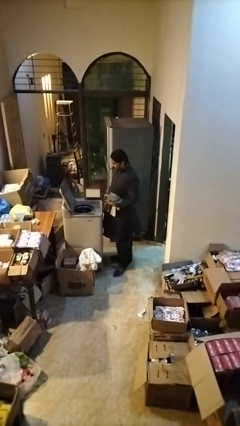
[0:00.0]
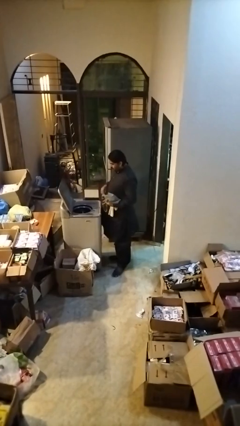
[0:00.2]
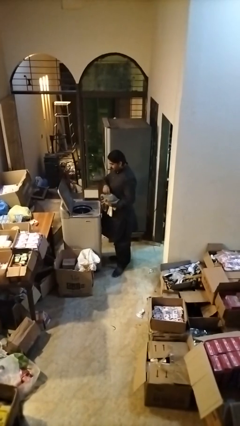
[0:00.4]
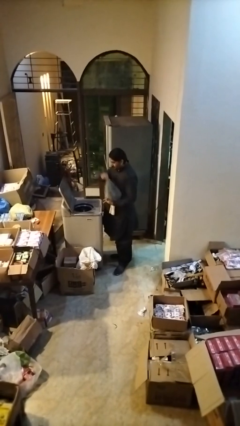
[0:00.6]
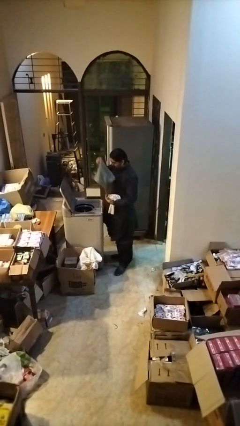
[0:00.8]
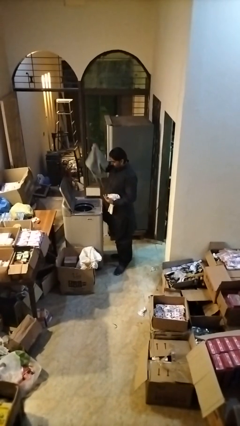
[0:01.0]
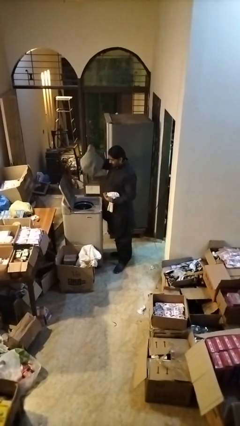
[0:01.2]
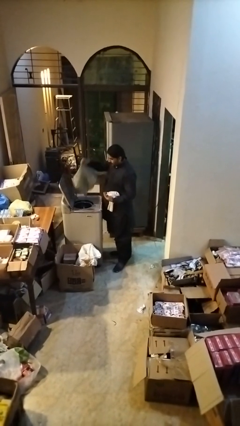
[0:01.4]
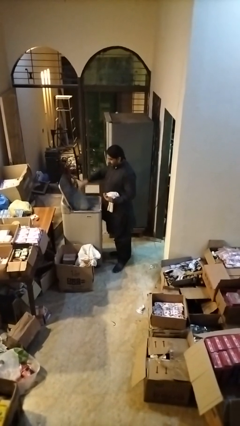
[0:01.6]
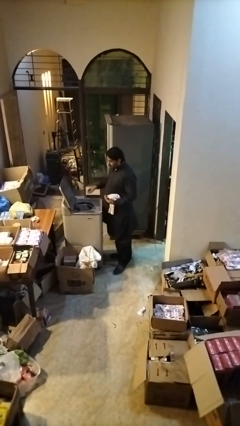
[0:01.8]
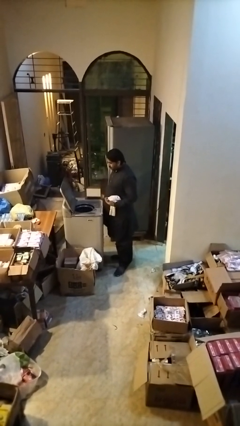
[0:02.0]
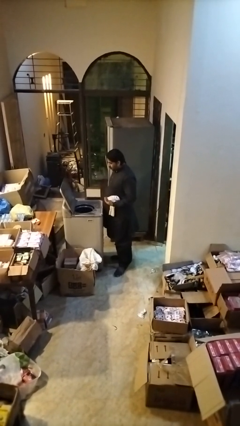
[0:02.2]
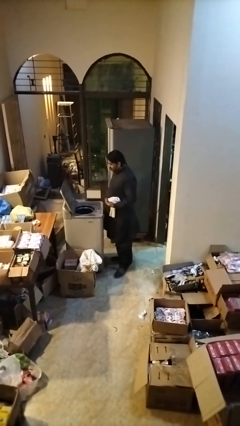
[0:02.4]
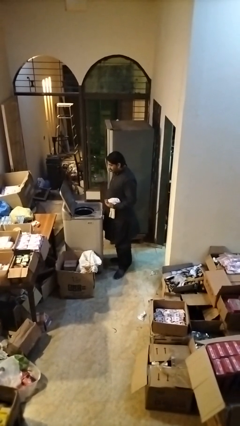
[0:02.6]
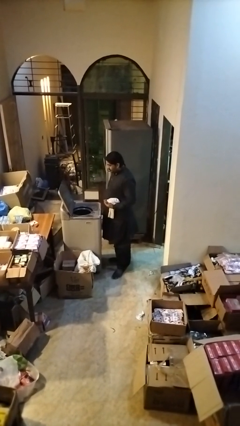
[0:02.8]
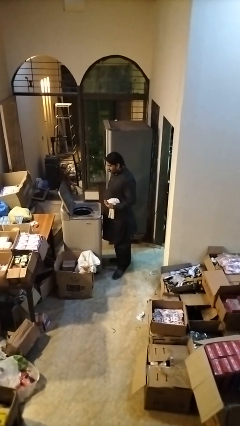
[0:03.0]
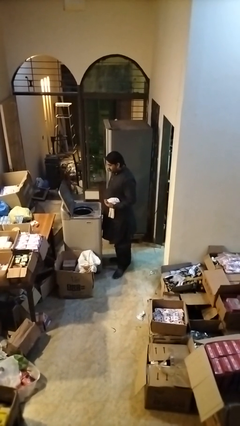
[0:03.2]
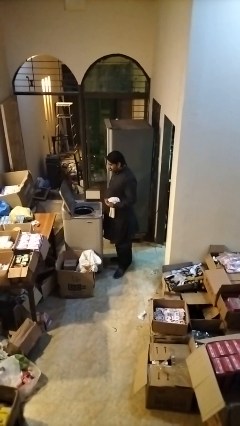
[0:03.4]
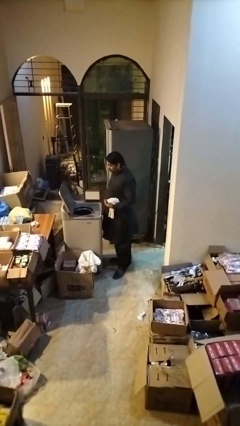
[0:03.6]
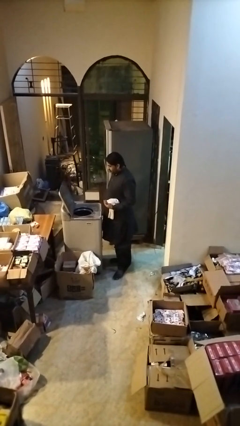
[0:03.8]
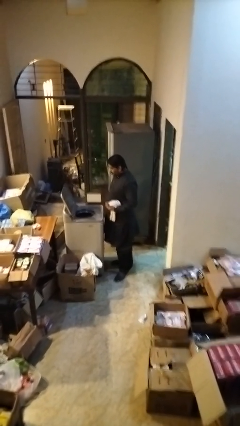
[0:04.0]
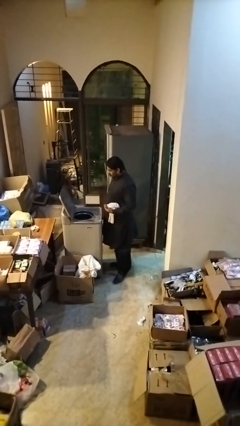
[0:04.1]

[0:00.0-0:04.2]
person loads dryer

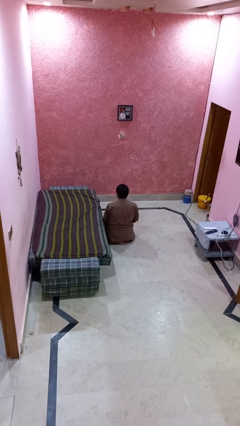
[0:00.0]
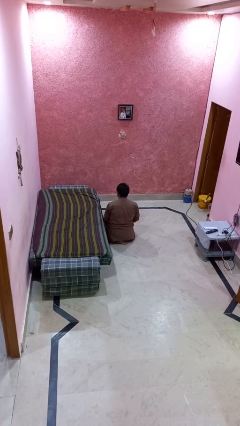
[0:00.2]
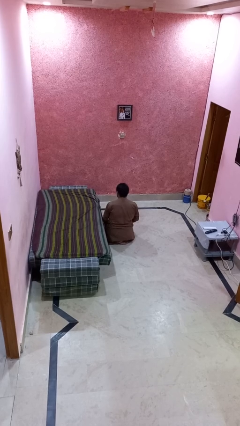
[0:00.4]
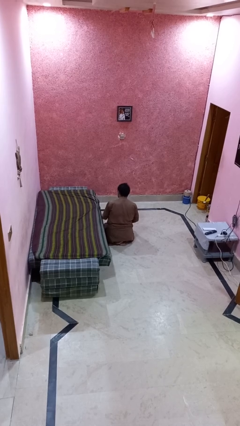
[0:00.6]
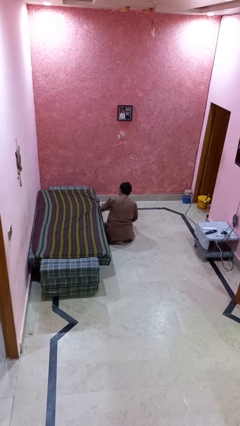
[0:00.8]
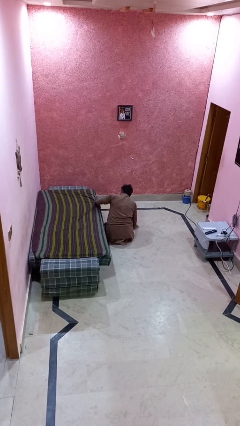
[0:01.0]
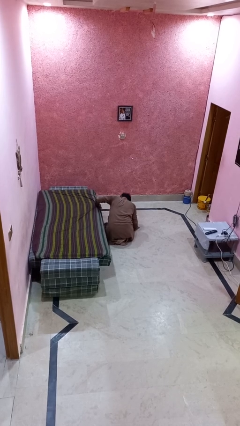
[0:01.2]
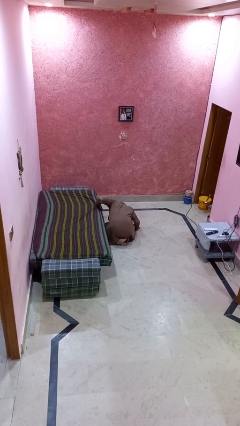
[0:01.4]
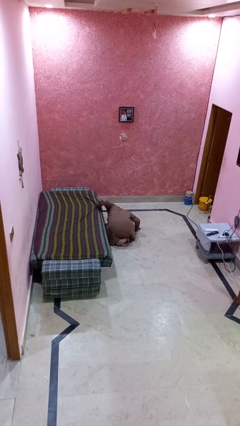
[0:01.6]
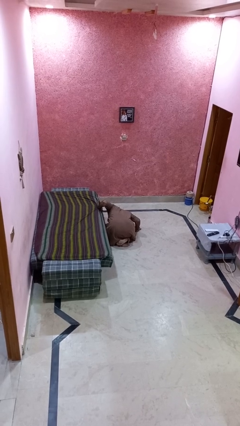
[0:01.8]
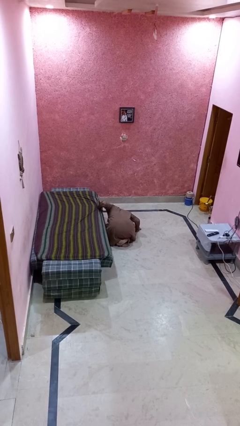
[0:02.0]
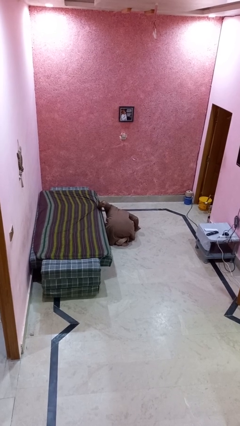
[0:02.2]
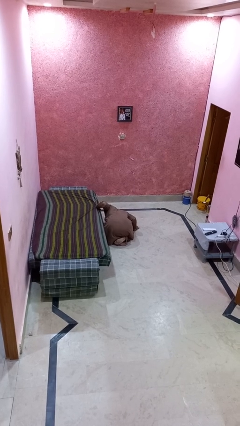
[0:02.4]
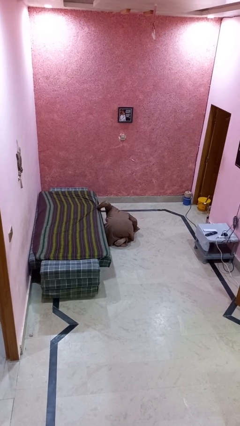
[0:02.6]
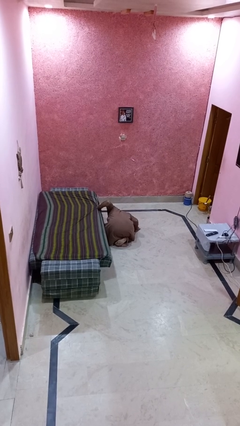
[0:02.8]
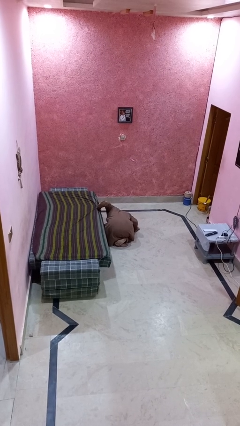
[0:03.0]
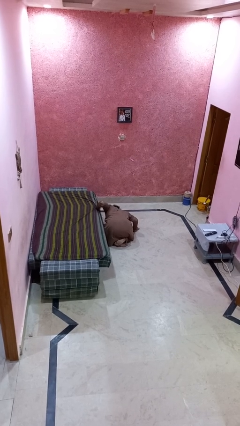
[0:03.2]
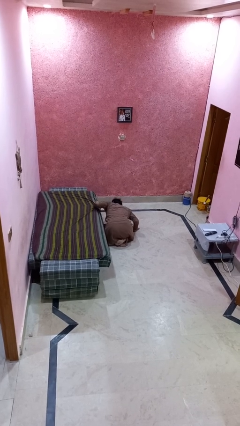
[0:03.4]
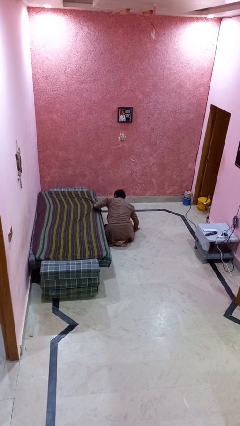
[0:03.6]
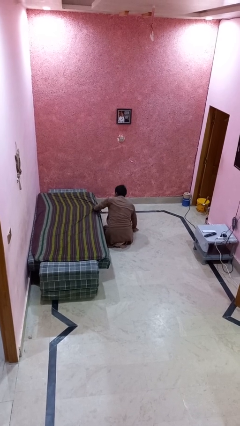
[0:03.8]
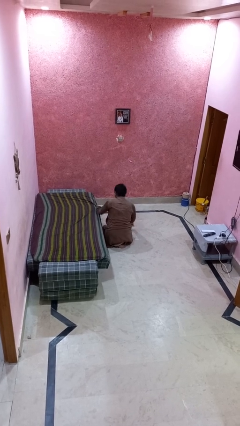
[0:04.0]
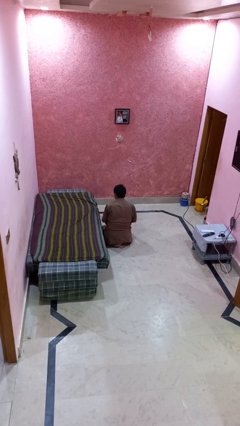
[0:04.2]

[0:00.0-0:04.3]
person searches under bed

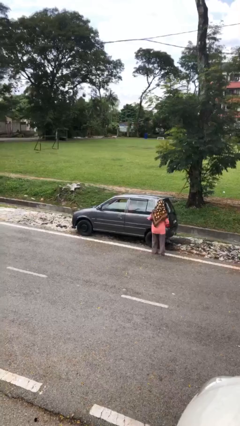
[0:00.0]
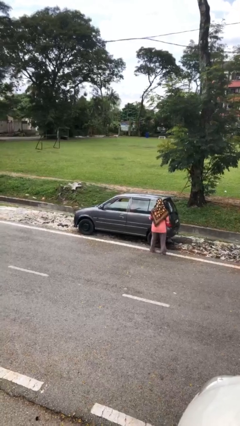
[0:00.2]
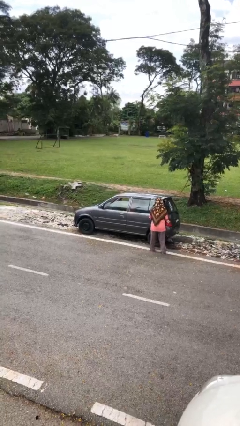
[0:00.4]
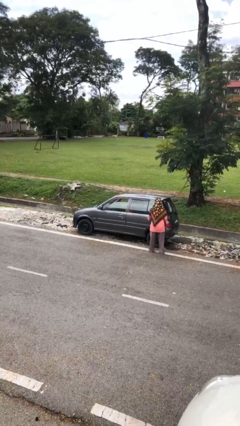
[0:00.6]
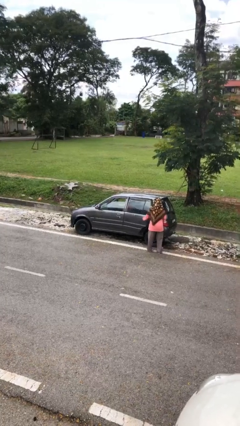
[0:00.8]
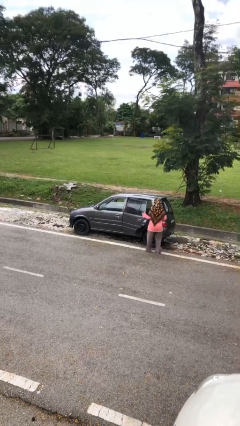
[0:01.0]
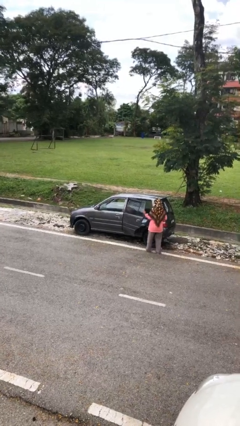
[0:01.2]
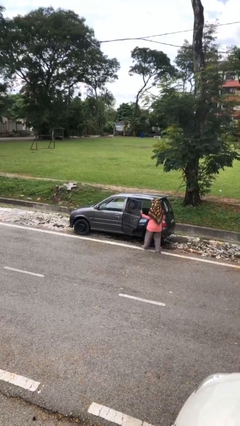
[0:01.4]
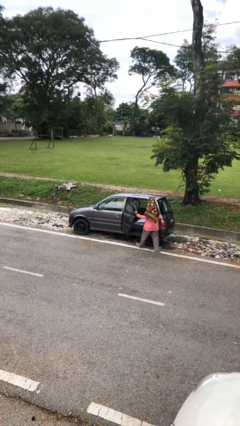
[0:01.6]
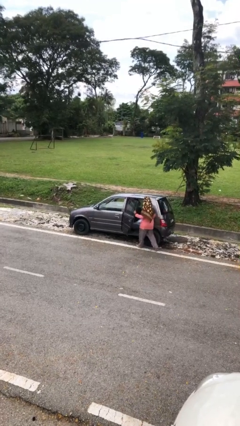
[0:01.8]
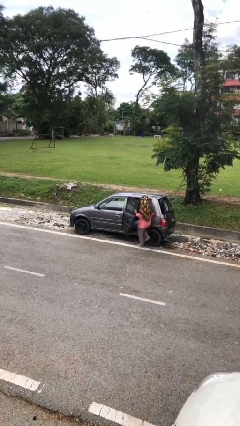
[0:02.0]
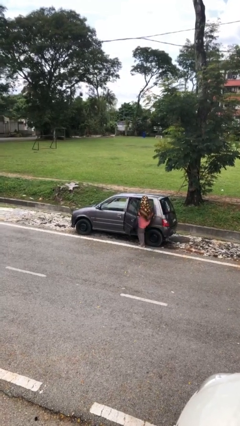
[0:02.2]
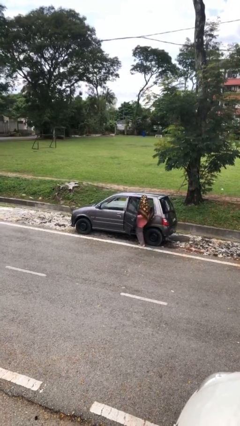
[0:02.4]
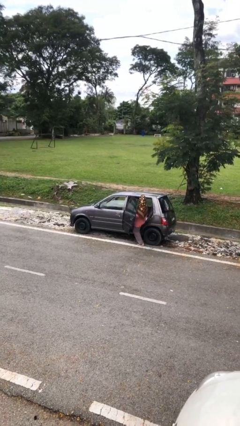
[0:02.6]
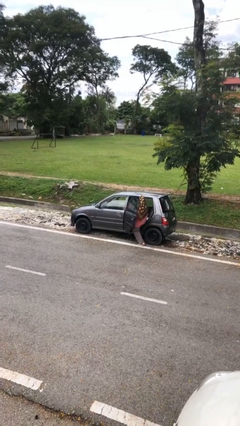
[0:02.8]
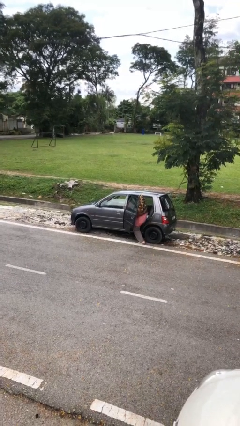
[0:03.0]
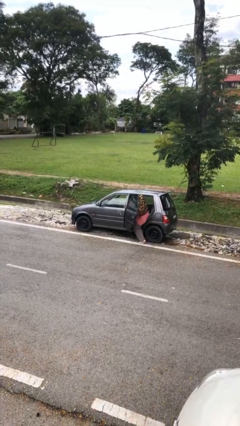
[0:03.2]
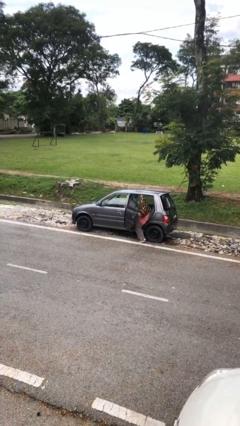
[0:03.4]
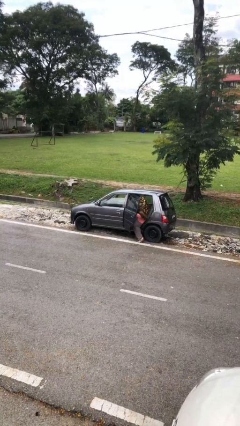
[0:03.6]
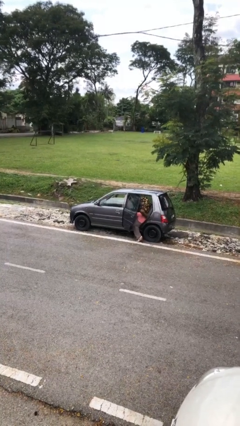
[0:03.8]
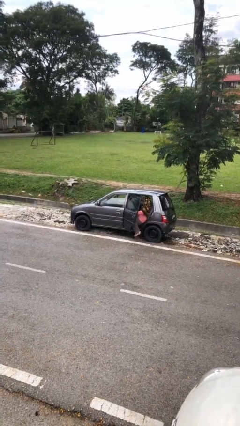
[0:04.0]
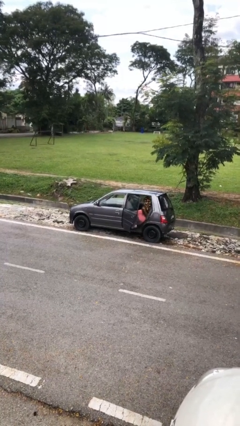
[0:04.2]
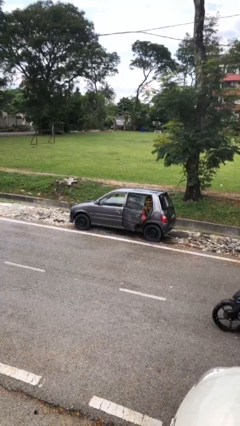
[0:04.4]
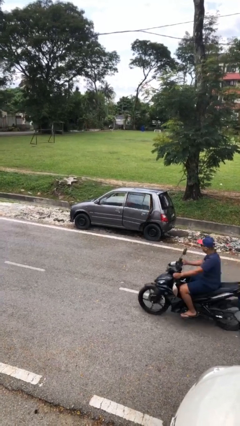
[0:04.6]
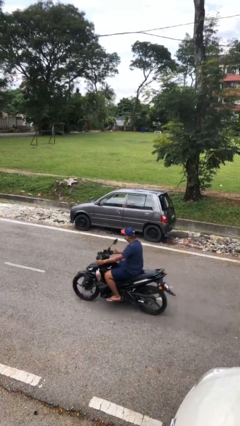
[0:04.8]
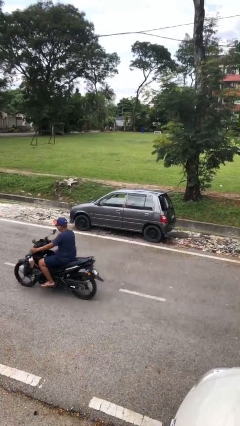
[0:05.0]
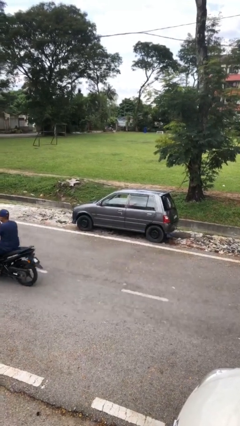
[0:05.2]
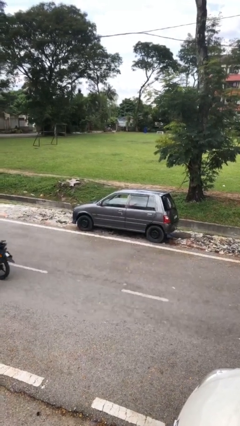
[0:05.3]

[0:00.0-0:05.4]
car picks up person

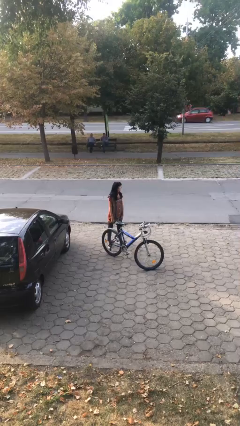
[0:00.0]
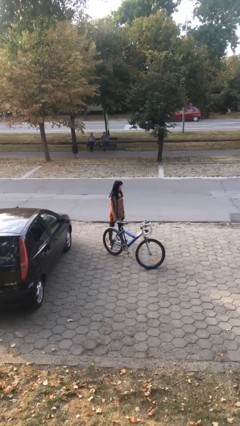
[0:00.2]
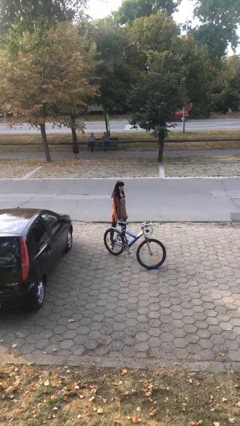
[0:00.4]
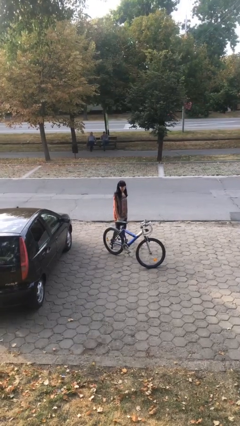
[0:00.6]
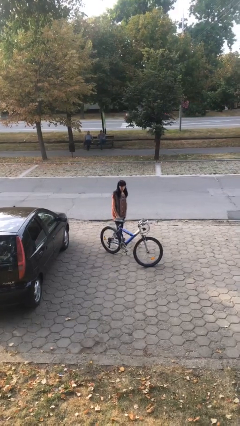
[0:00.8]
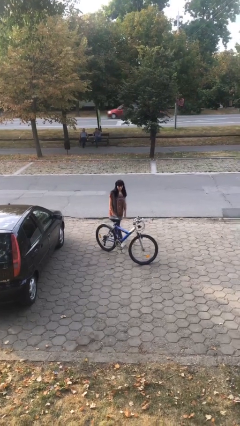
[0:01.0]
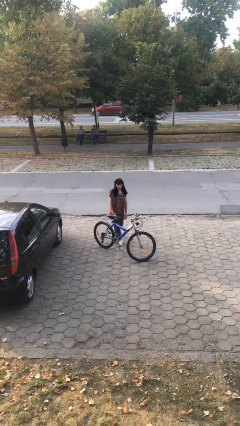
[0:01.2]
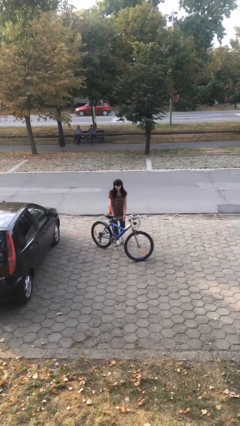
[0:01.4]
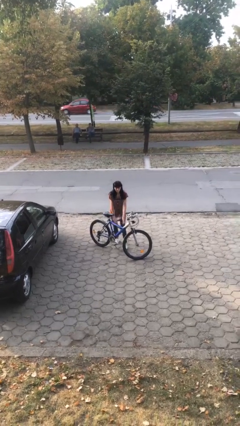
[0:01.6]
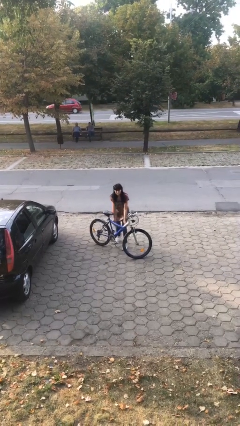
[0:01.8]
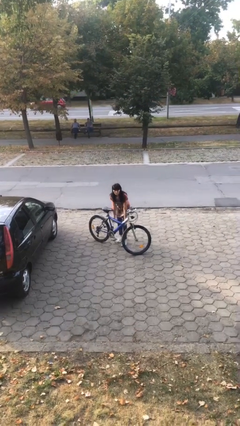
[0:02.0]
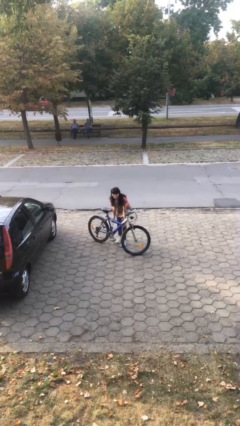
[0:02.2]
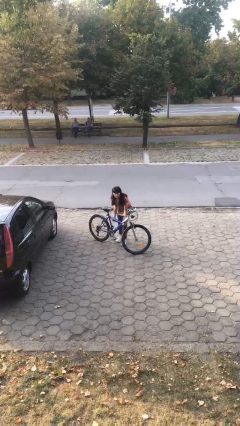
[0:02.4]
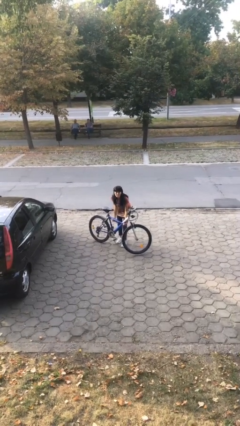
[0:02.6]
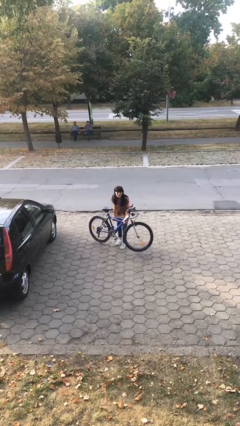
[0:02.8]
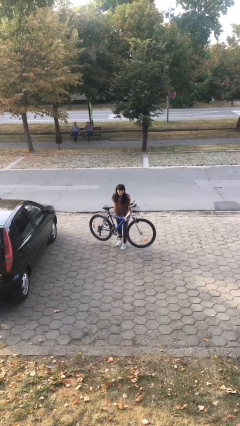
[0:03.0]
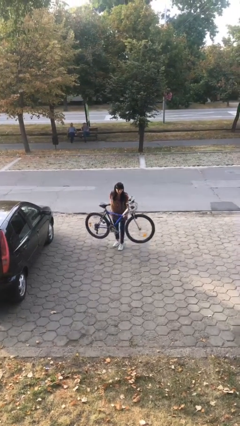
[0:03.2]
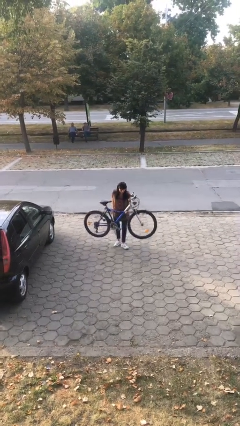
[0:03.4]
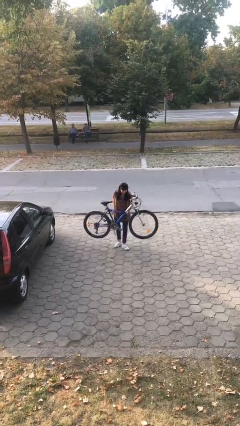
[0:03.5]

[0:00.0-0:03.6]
person picks up object from floor

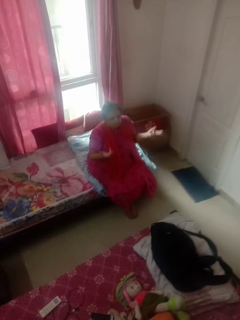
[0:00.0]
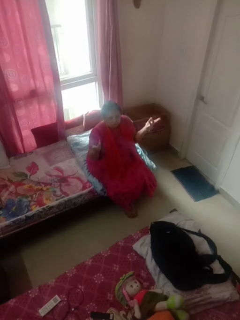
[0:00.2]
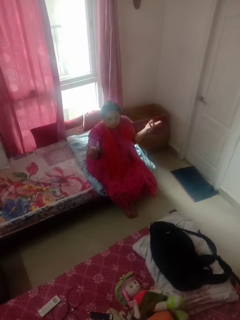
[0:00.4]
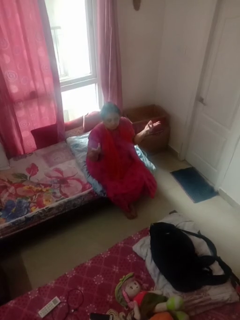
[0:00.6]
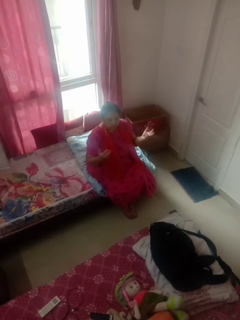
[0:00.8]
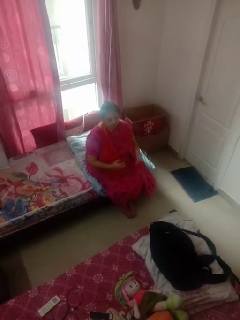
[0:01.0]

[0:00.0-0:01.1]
person shrugs
